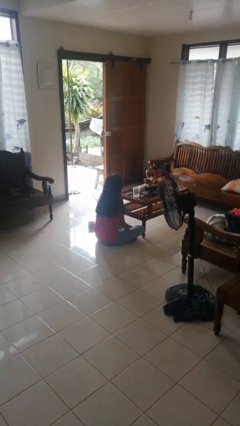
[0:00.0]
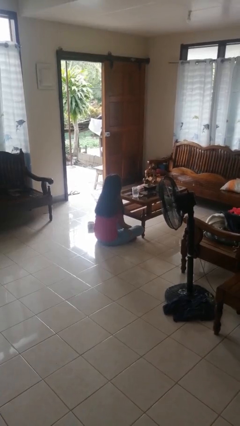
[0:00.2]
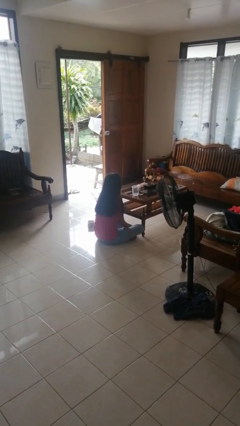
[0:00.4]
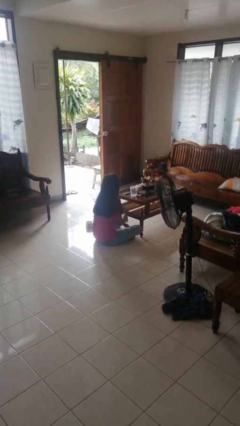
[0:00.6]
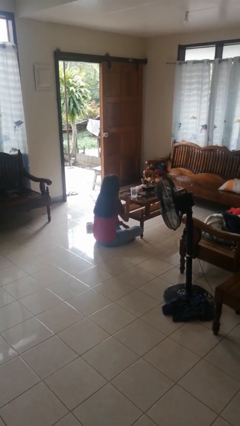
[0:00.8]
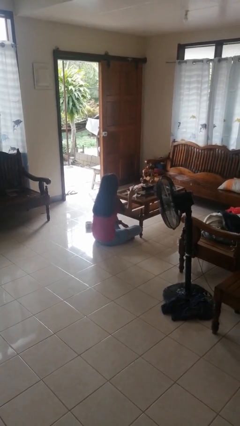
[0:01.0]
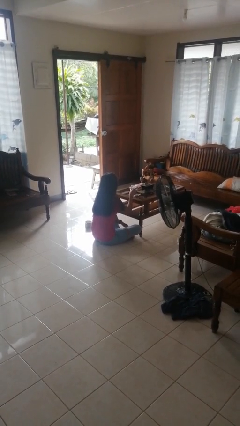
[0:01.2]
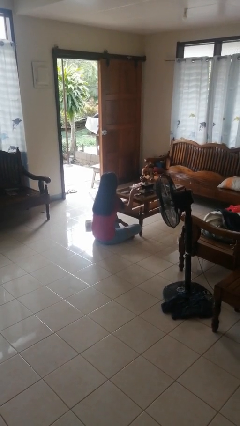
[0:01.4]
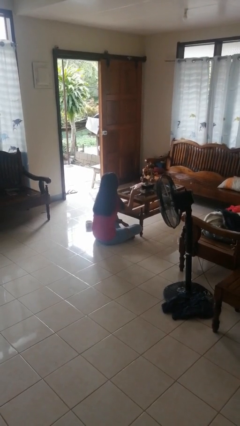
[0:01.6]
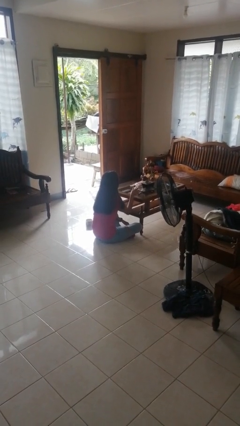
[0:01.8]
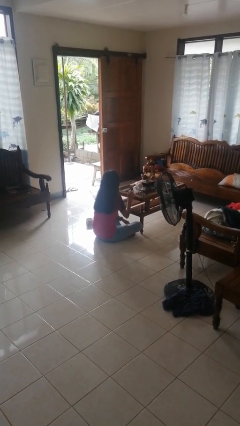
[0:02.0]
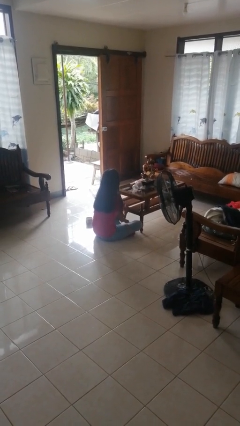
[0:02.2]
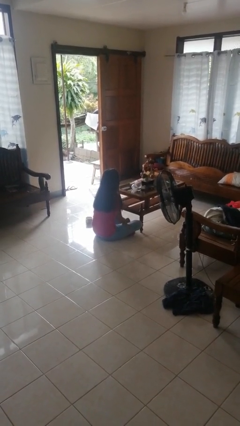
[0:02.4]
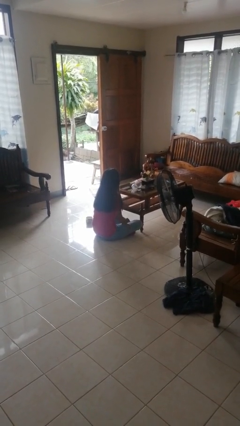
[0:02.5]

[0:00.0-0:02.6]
person knocks over glass

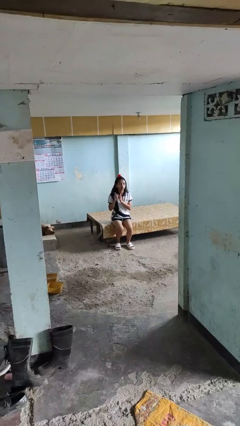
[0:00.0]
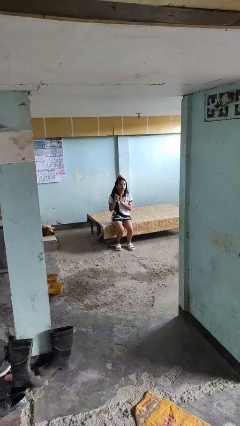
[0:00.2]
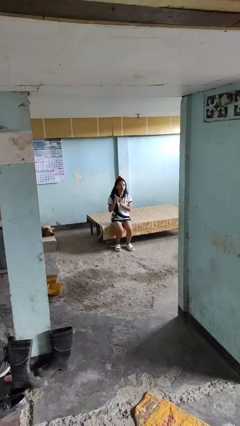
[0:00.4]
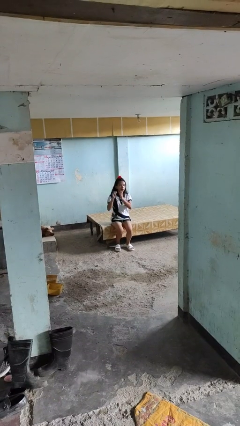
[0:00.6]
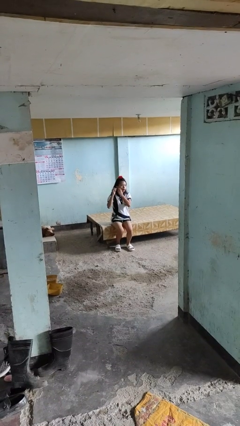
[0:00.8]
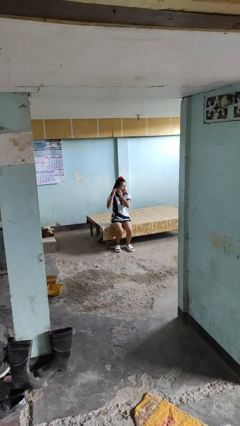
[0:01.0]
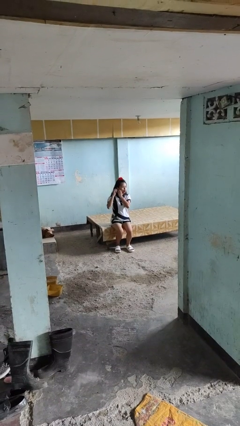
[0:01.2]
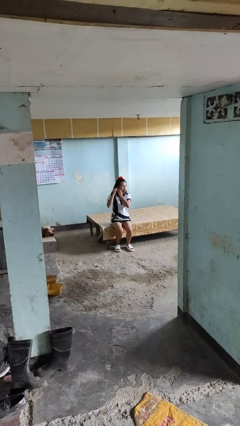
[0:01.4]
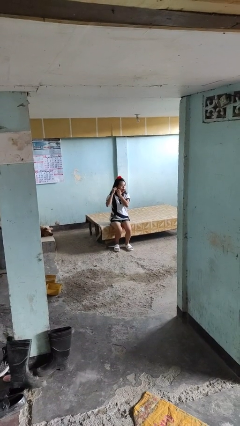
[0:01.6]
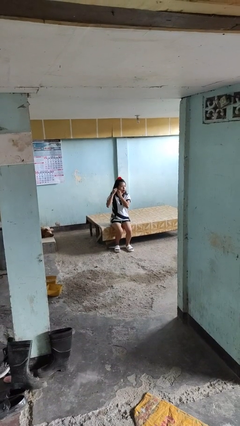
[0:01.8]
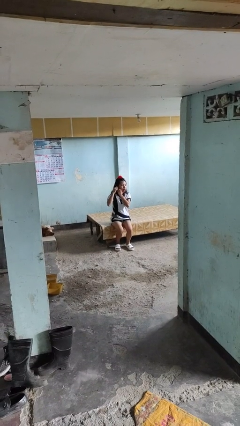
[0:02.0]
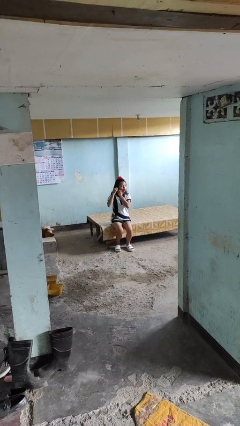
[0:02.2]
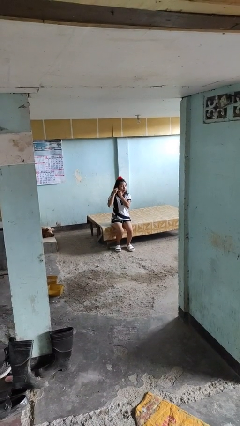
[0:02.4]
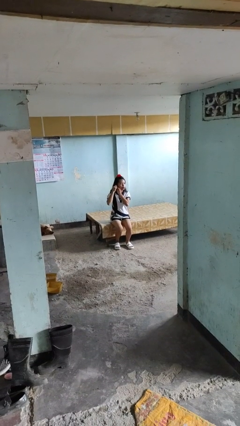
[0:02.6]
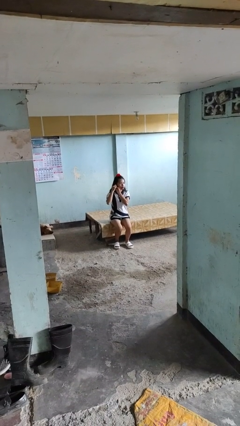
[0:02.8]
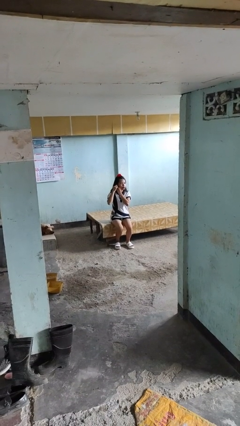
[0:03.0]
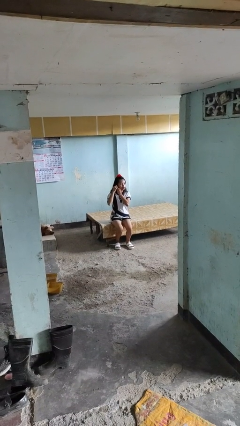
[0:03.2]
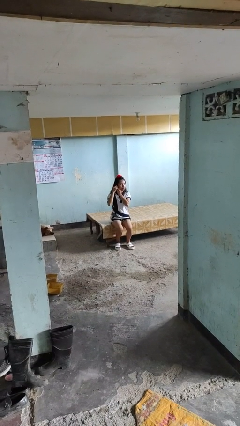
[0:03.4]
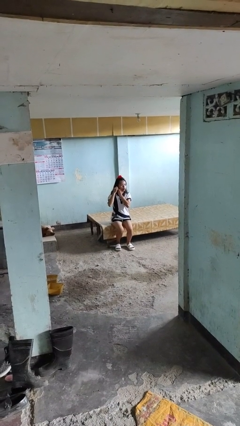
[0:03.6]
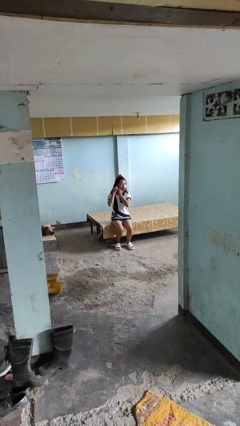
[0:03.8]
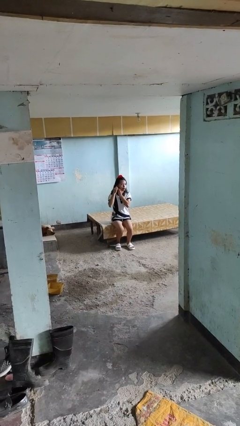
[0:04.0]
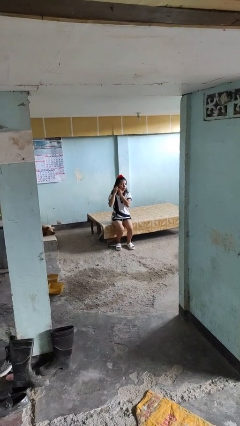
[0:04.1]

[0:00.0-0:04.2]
person puts on earrings

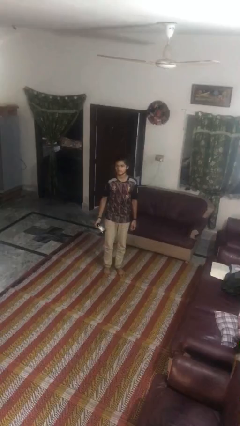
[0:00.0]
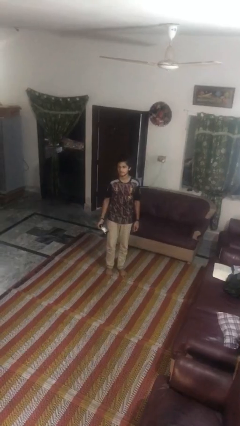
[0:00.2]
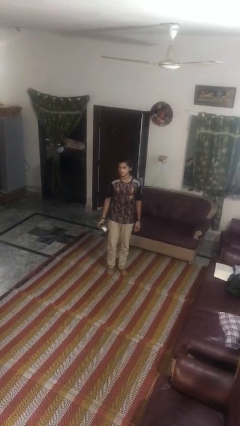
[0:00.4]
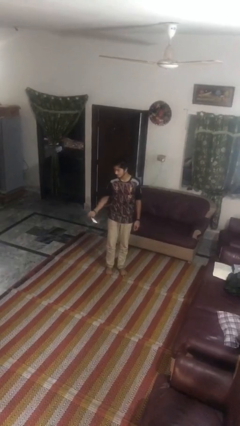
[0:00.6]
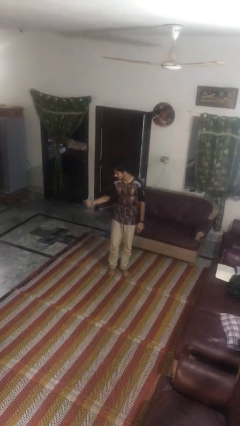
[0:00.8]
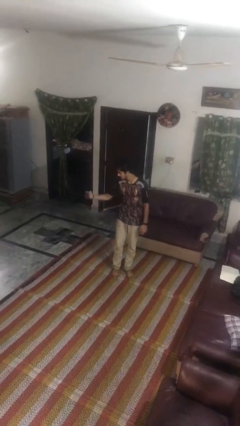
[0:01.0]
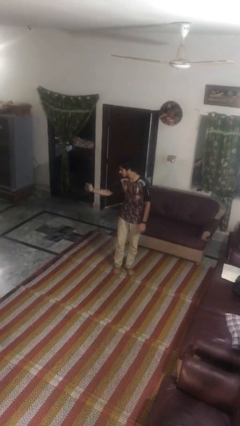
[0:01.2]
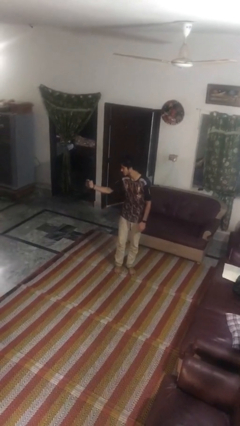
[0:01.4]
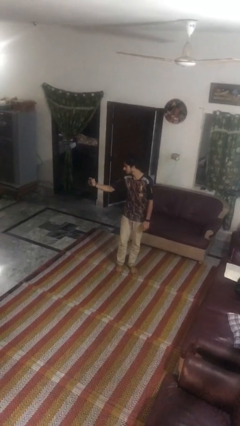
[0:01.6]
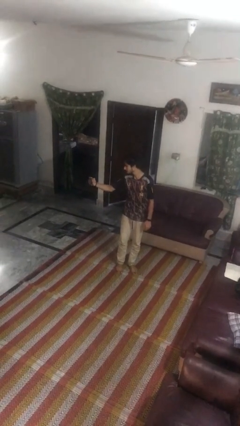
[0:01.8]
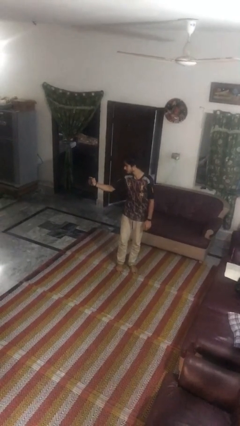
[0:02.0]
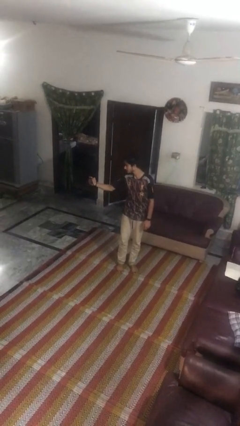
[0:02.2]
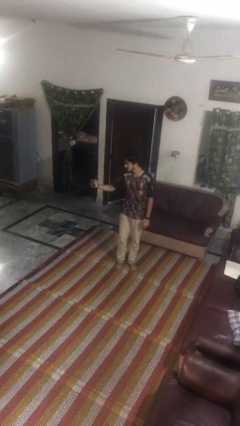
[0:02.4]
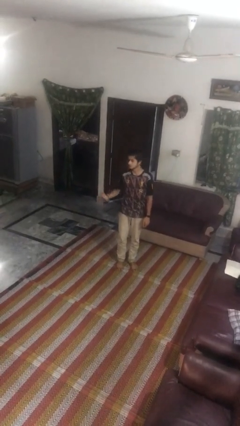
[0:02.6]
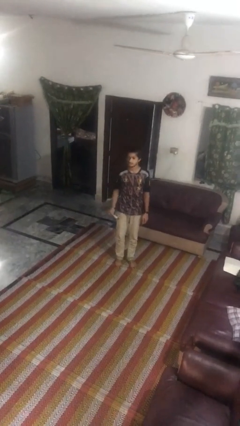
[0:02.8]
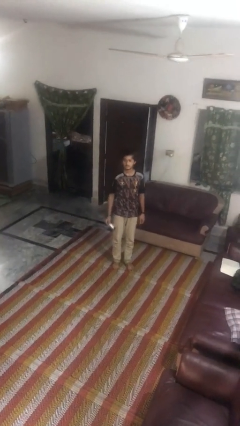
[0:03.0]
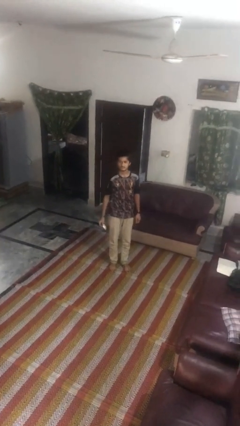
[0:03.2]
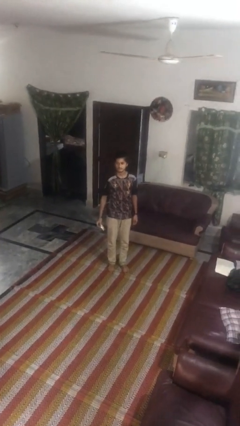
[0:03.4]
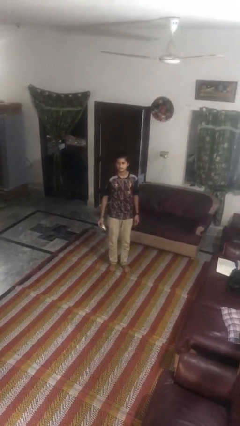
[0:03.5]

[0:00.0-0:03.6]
person takes selfie

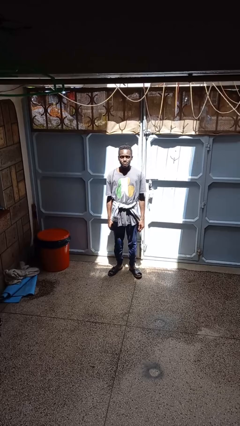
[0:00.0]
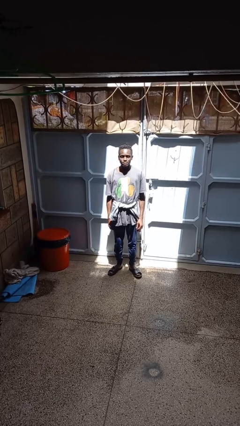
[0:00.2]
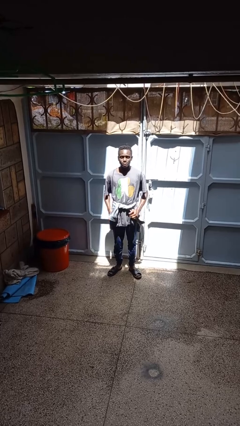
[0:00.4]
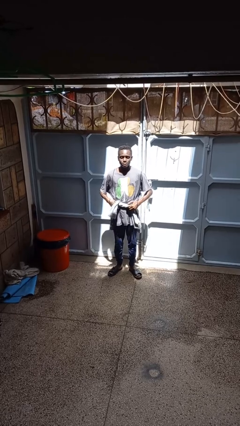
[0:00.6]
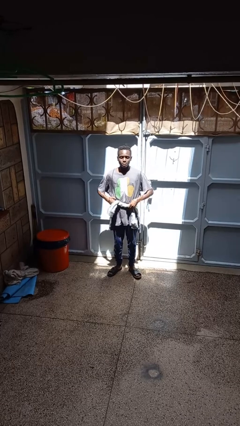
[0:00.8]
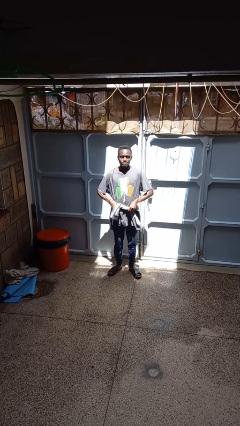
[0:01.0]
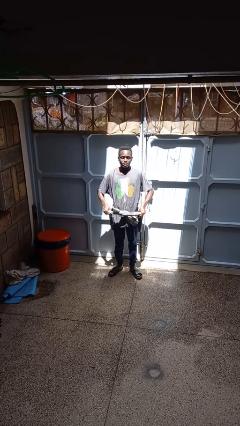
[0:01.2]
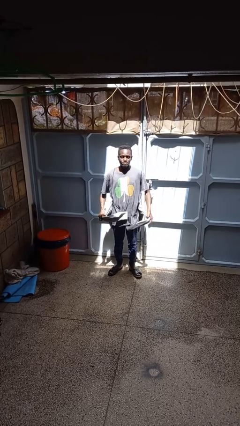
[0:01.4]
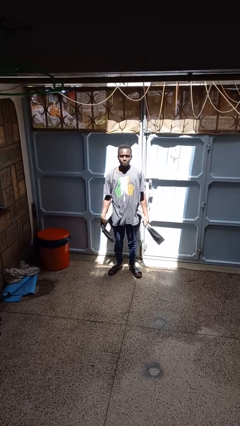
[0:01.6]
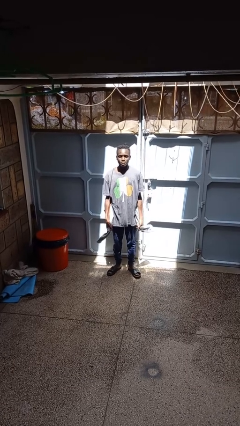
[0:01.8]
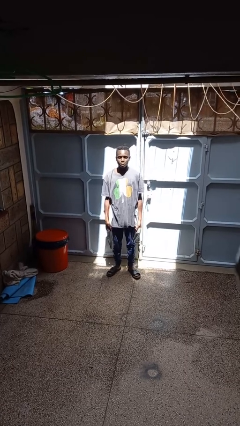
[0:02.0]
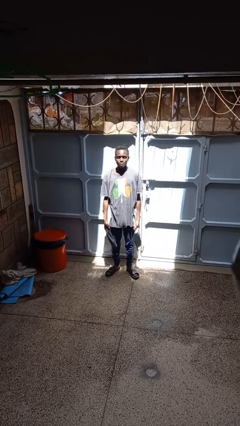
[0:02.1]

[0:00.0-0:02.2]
person unties jacket around waist

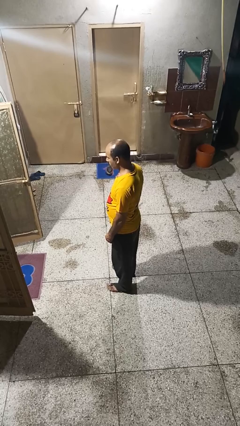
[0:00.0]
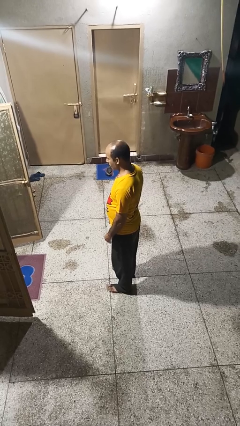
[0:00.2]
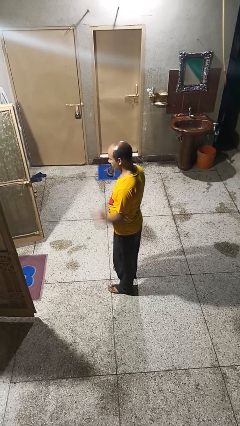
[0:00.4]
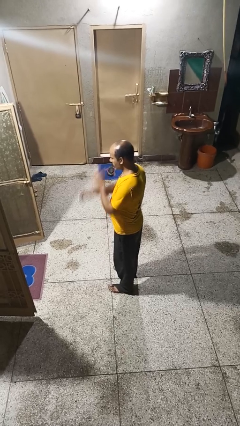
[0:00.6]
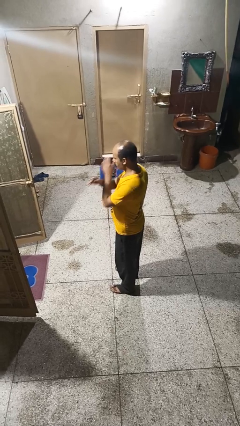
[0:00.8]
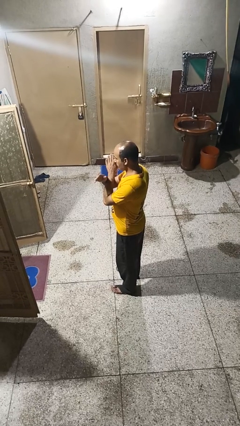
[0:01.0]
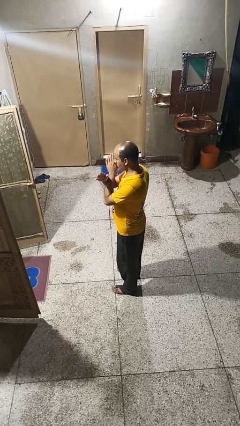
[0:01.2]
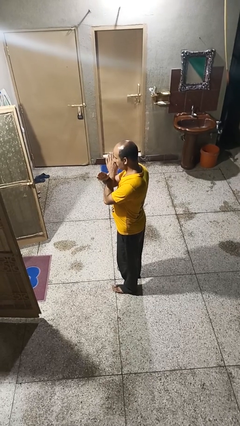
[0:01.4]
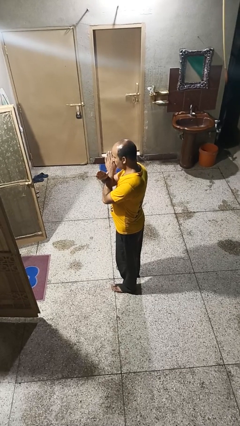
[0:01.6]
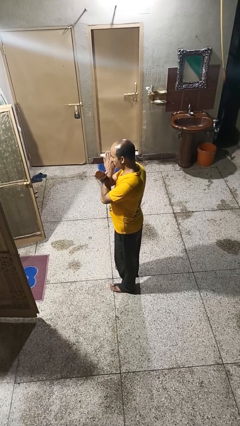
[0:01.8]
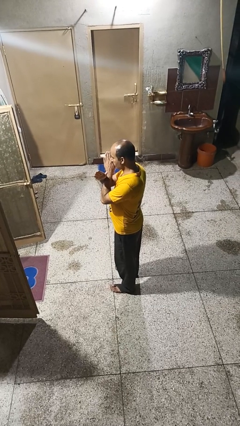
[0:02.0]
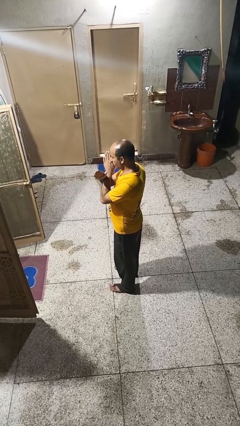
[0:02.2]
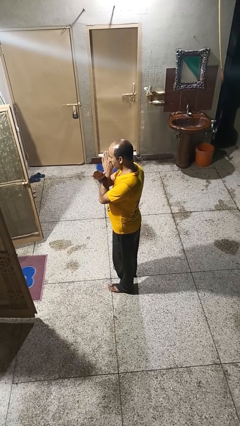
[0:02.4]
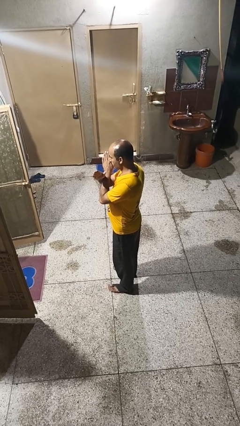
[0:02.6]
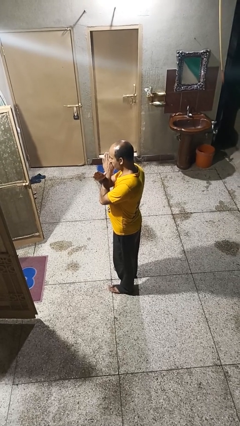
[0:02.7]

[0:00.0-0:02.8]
person gestures arms x

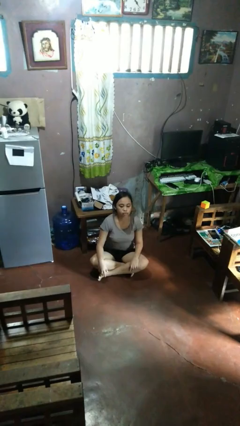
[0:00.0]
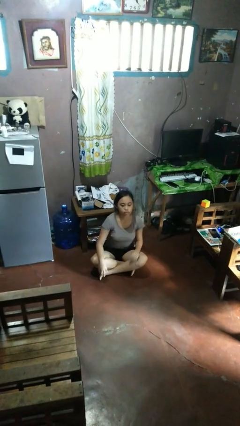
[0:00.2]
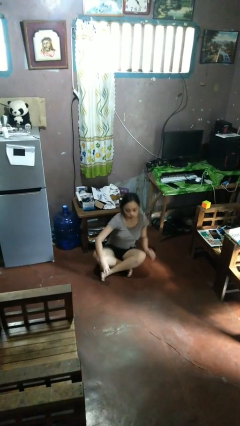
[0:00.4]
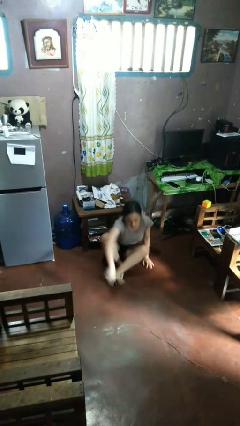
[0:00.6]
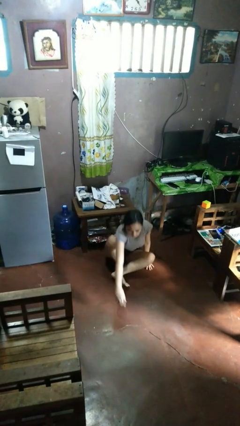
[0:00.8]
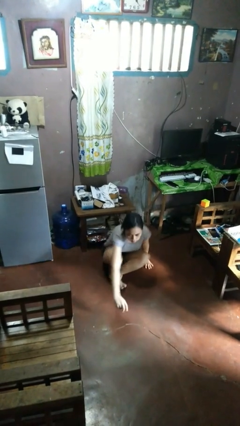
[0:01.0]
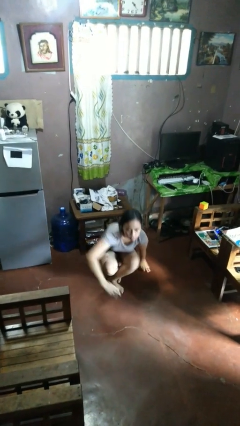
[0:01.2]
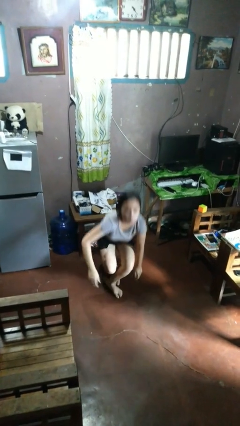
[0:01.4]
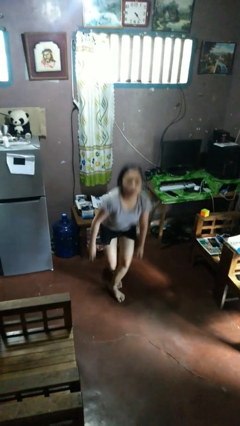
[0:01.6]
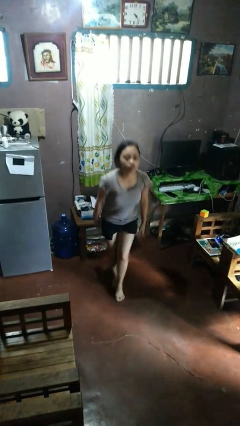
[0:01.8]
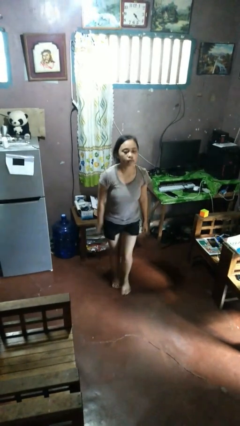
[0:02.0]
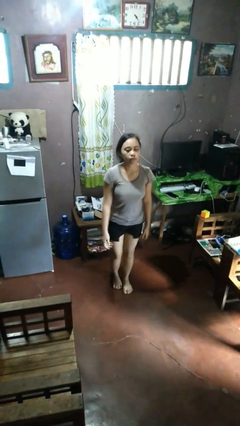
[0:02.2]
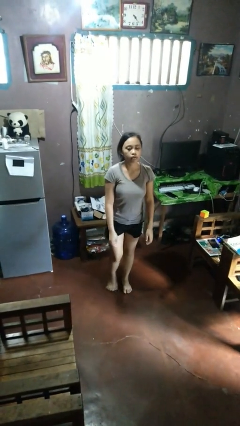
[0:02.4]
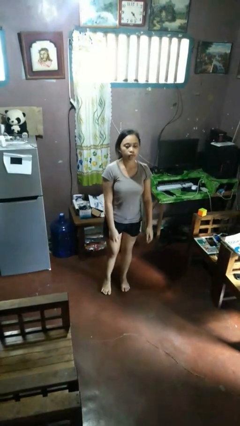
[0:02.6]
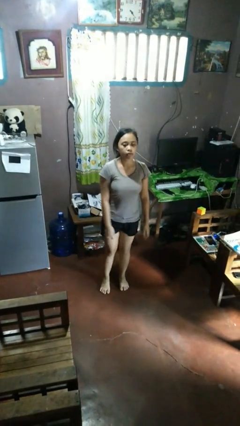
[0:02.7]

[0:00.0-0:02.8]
person stands up from floor
